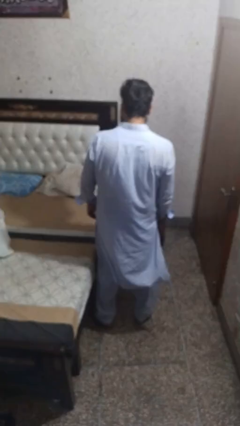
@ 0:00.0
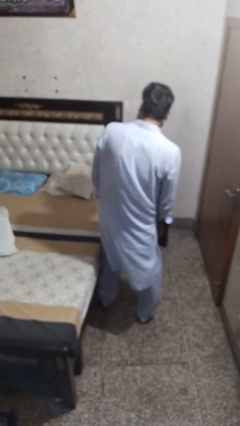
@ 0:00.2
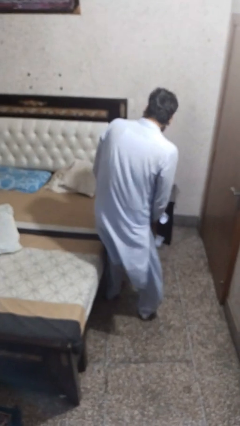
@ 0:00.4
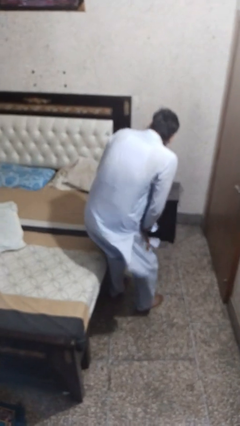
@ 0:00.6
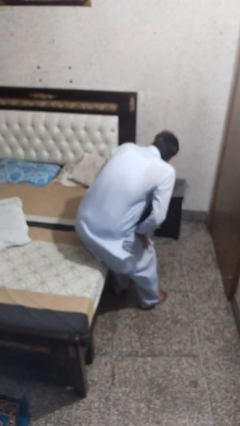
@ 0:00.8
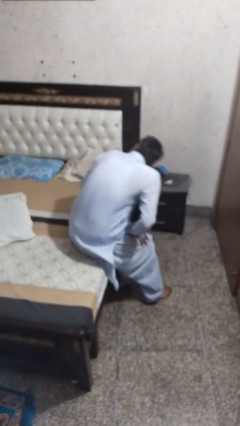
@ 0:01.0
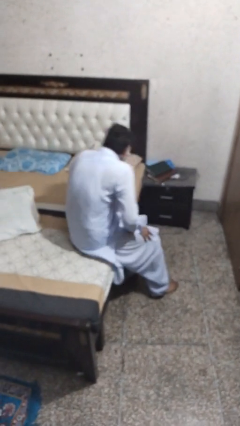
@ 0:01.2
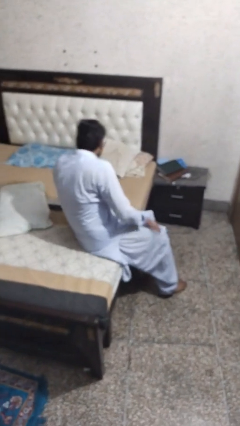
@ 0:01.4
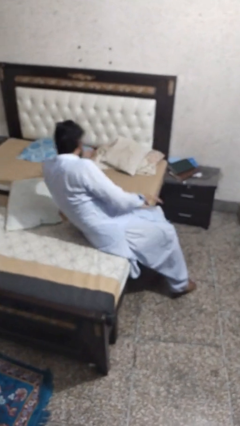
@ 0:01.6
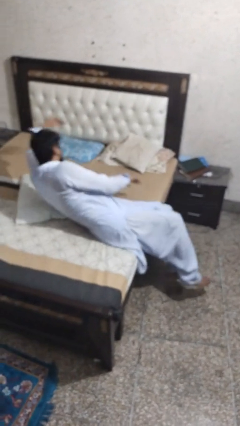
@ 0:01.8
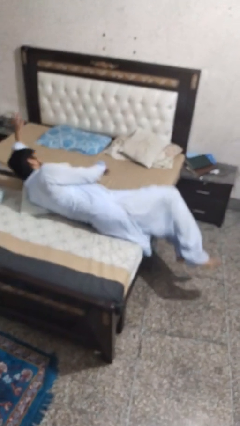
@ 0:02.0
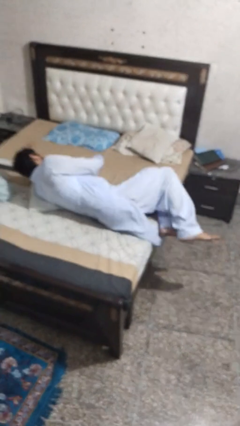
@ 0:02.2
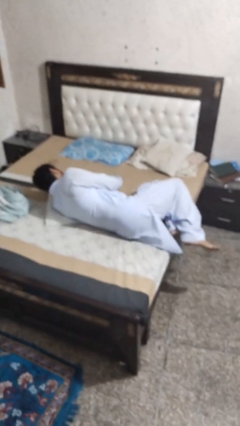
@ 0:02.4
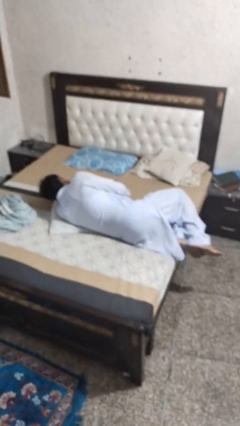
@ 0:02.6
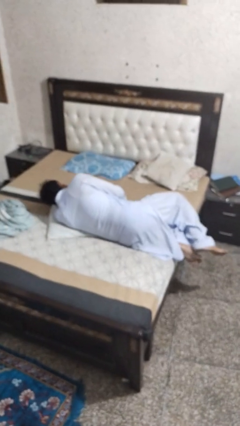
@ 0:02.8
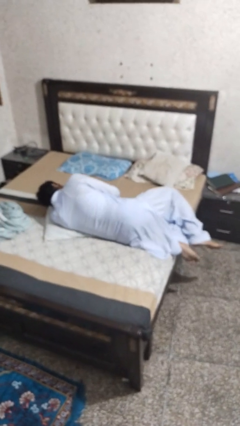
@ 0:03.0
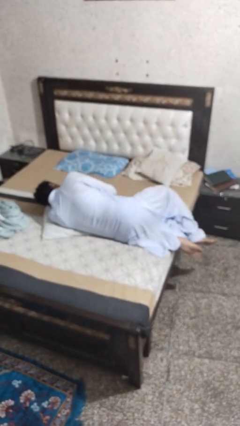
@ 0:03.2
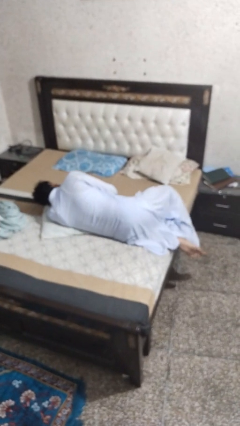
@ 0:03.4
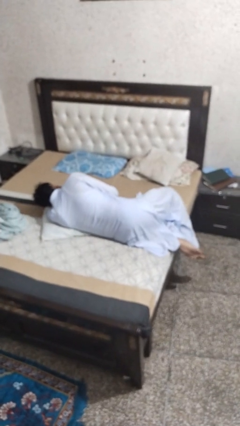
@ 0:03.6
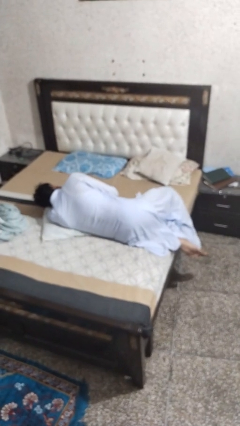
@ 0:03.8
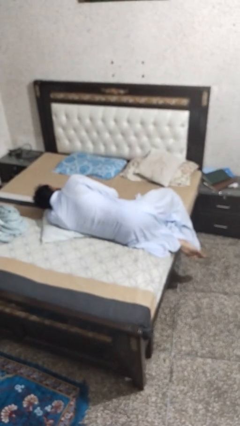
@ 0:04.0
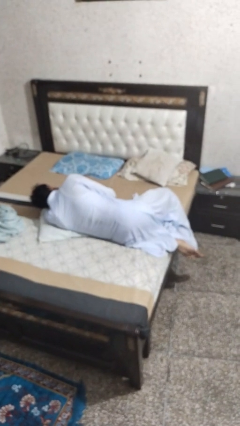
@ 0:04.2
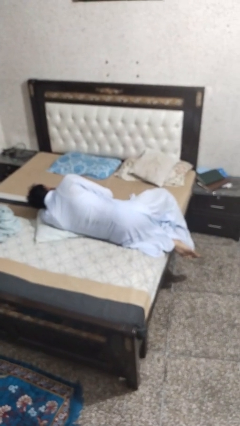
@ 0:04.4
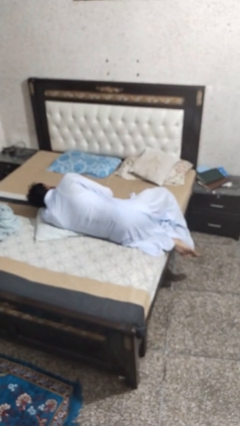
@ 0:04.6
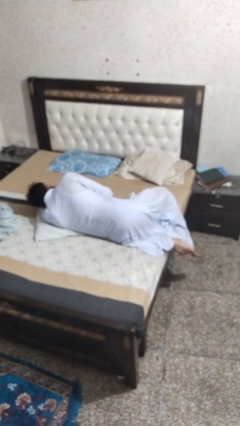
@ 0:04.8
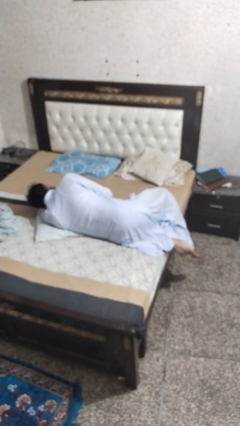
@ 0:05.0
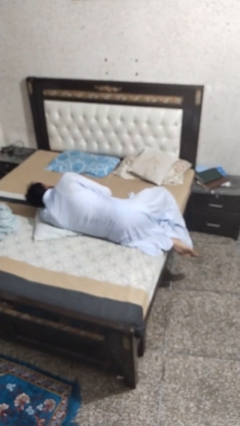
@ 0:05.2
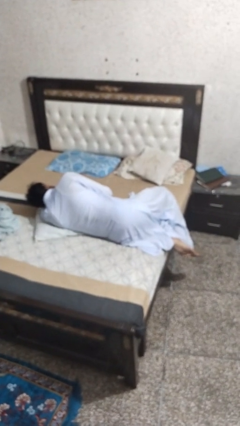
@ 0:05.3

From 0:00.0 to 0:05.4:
person lies down on bed

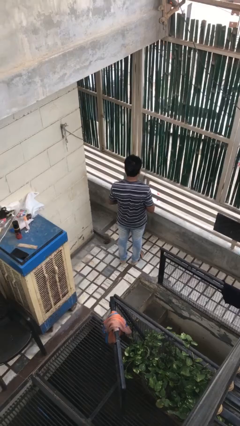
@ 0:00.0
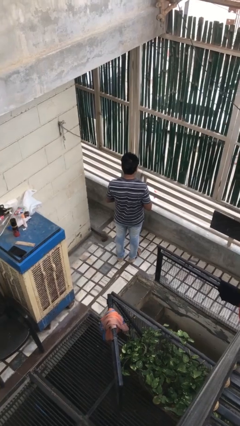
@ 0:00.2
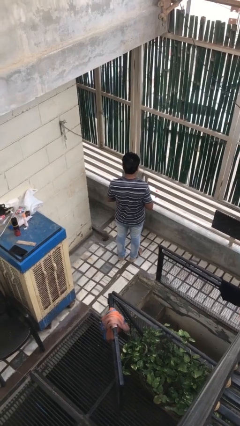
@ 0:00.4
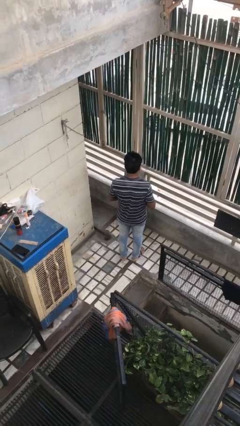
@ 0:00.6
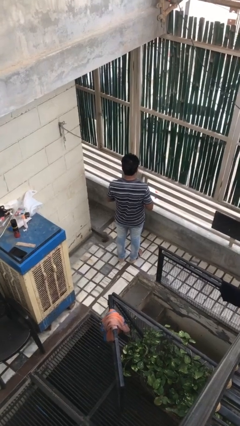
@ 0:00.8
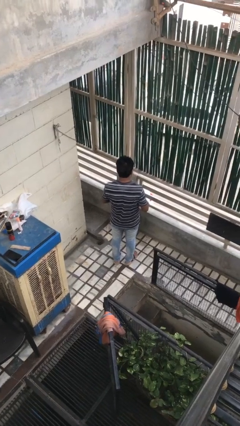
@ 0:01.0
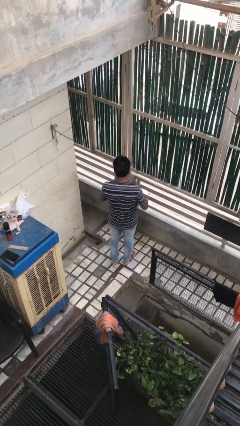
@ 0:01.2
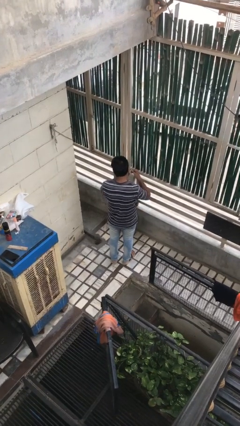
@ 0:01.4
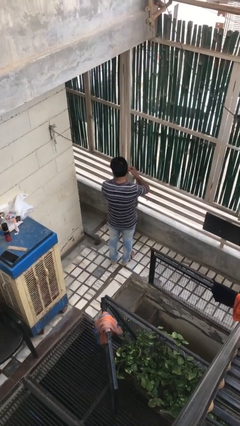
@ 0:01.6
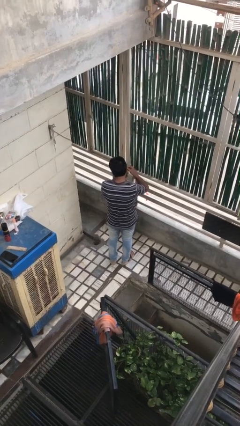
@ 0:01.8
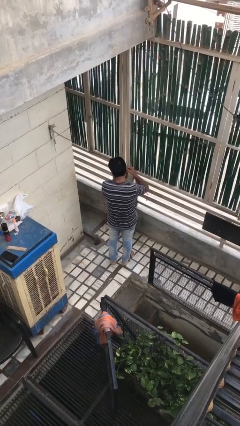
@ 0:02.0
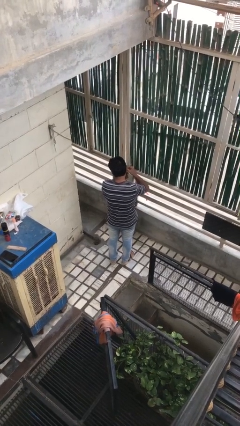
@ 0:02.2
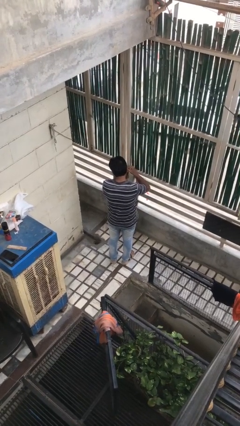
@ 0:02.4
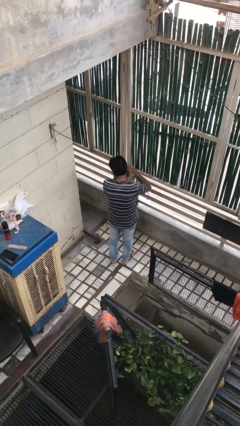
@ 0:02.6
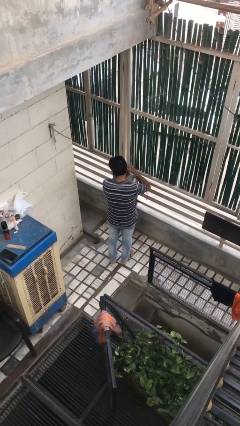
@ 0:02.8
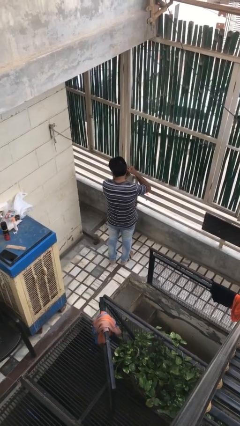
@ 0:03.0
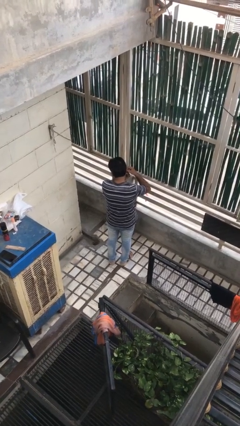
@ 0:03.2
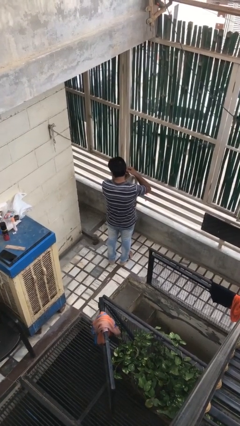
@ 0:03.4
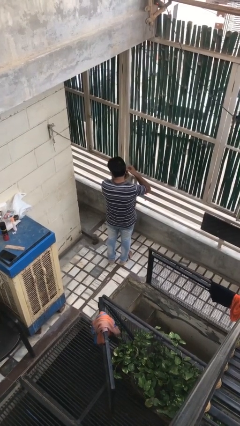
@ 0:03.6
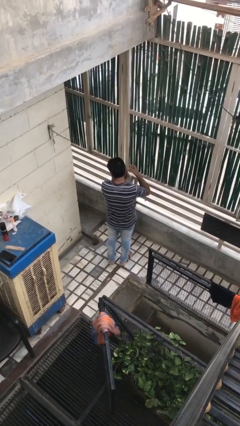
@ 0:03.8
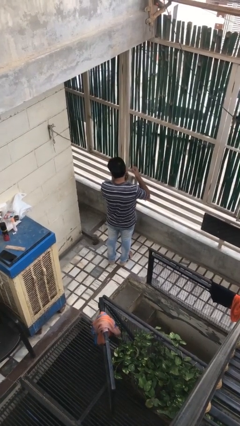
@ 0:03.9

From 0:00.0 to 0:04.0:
person puts on earrings

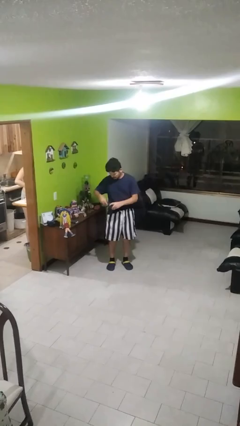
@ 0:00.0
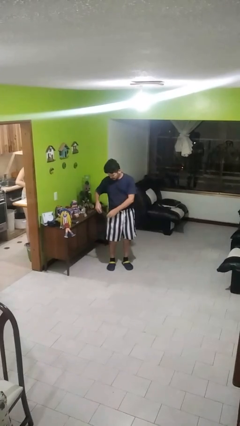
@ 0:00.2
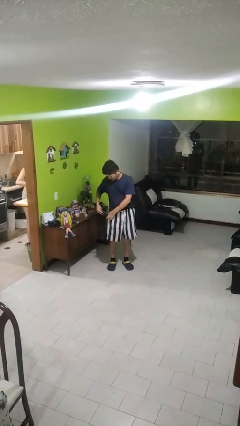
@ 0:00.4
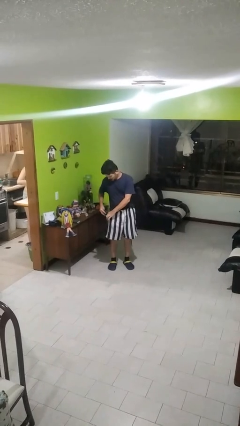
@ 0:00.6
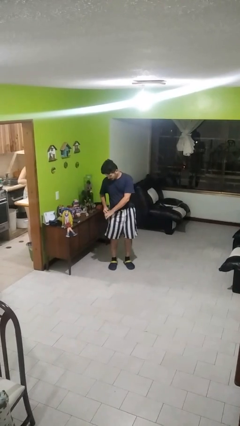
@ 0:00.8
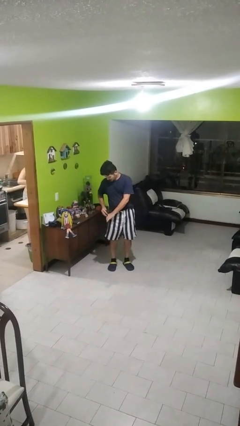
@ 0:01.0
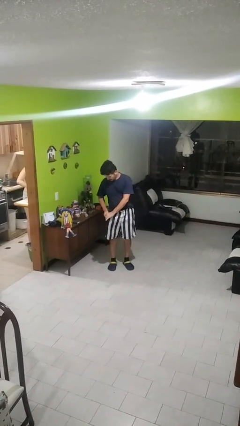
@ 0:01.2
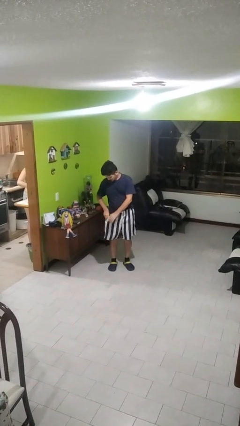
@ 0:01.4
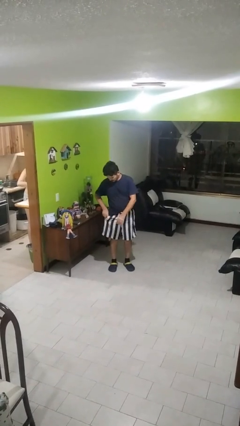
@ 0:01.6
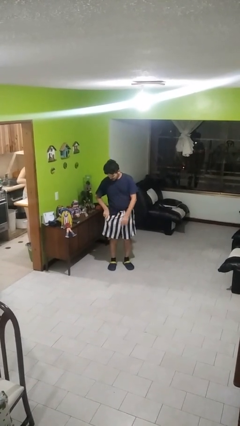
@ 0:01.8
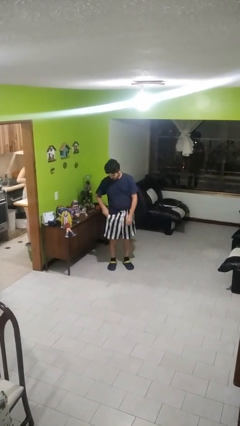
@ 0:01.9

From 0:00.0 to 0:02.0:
person puts phone into pocket

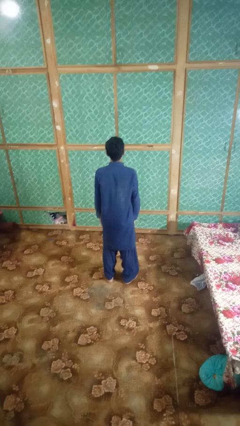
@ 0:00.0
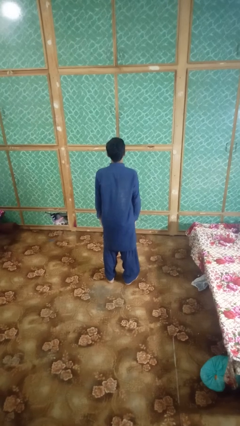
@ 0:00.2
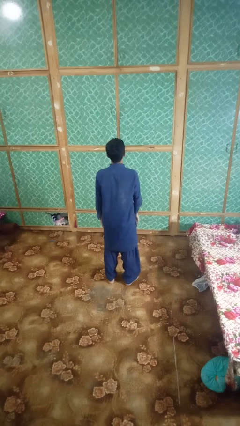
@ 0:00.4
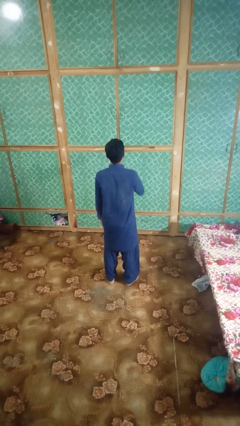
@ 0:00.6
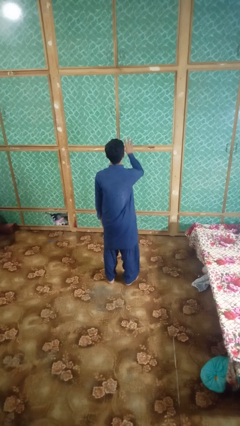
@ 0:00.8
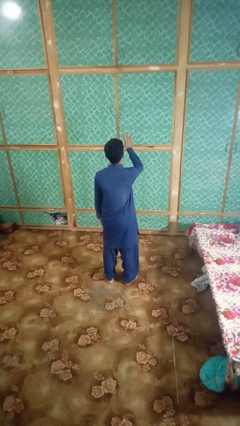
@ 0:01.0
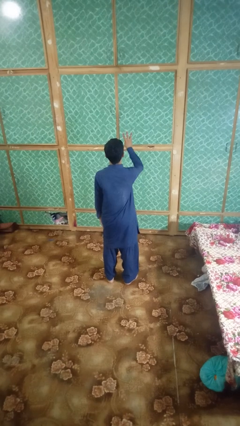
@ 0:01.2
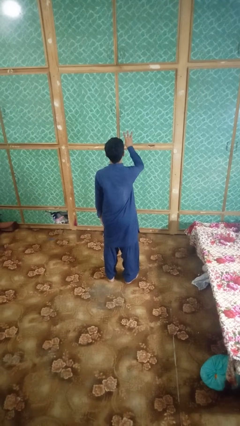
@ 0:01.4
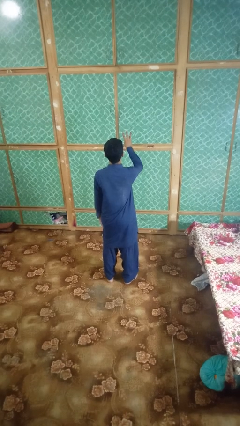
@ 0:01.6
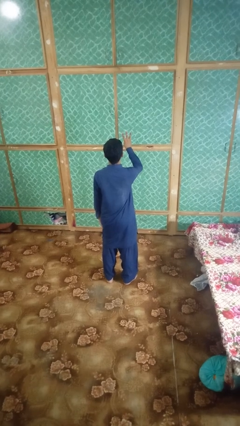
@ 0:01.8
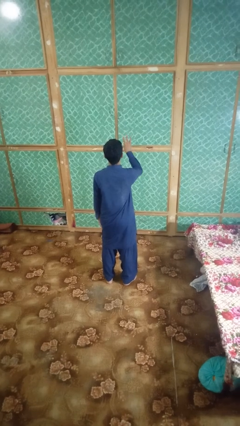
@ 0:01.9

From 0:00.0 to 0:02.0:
person gestures number three

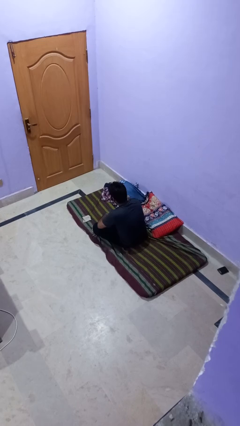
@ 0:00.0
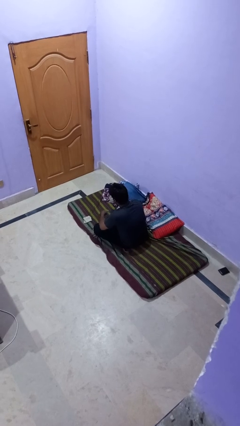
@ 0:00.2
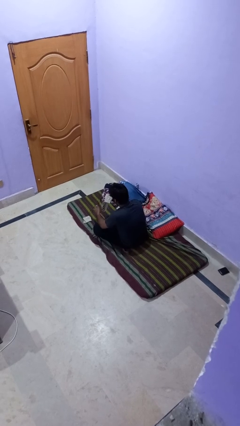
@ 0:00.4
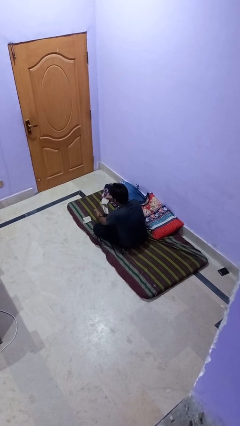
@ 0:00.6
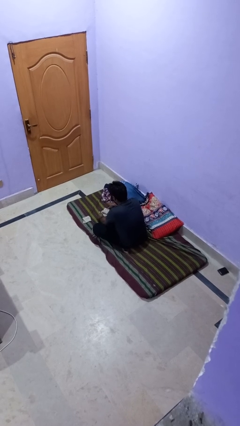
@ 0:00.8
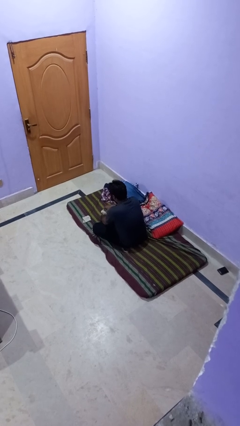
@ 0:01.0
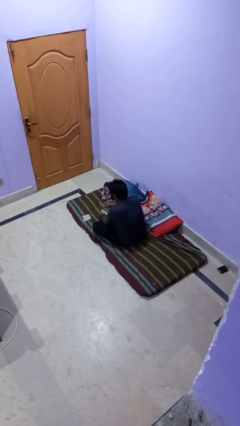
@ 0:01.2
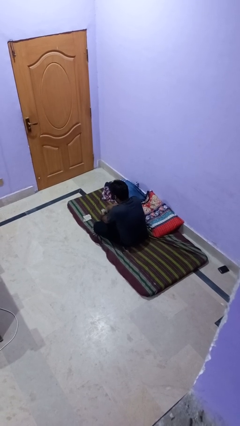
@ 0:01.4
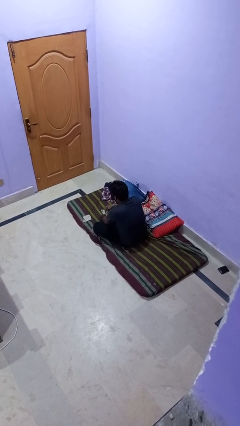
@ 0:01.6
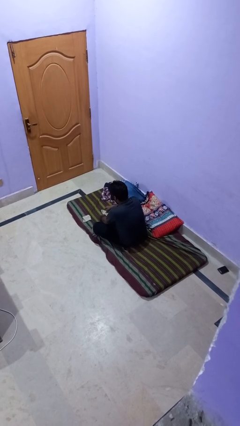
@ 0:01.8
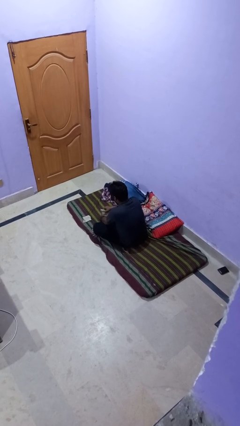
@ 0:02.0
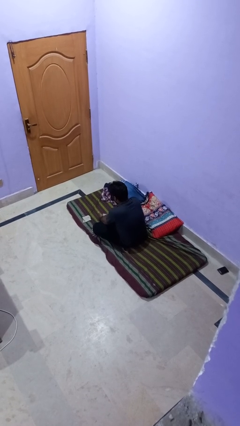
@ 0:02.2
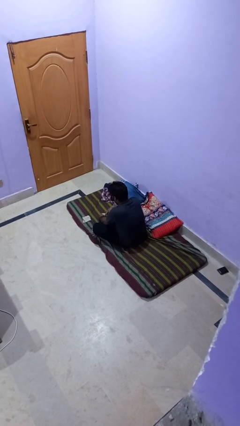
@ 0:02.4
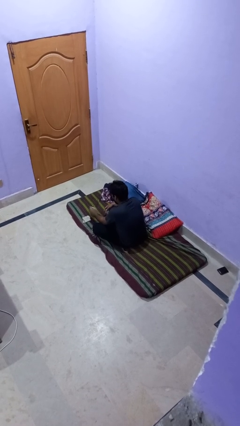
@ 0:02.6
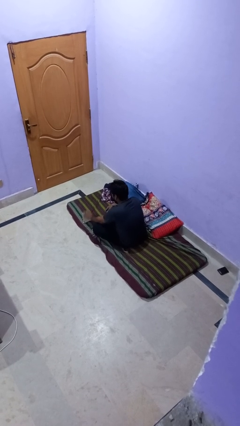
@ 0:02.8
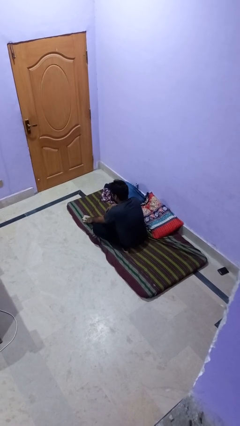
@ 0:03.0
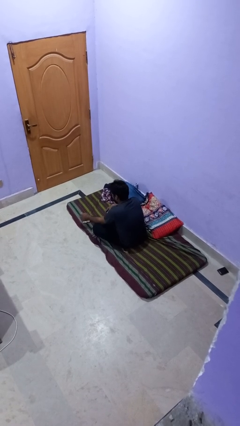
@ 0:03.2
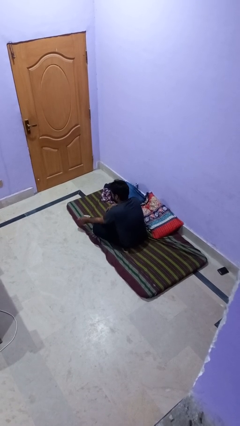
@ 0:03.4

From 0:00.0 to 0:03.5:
person folds socks

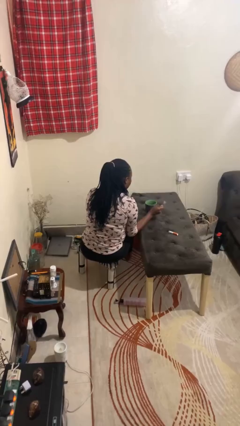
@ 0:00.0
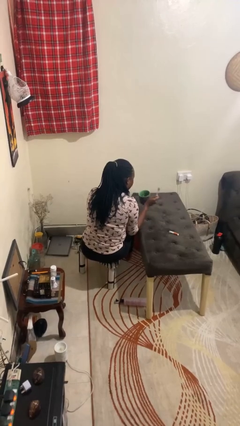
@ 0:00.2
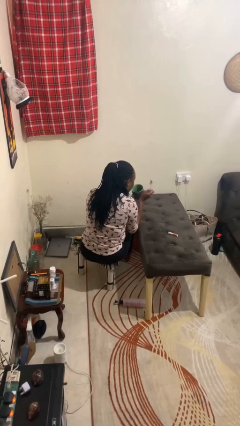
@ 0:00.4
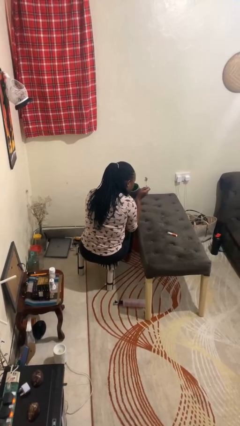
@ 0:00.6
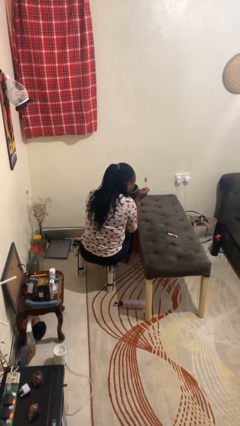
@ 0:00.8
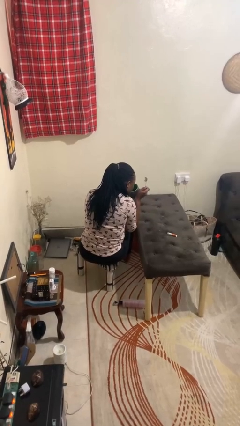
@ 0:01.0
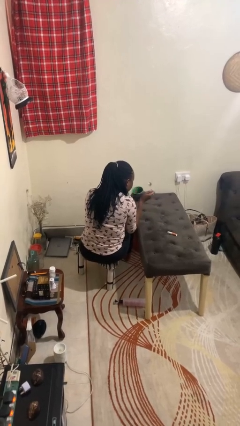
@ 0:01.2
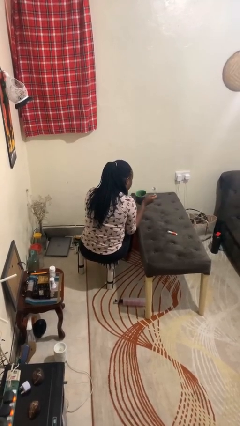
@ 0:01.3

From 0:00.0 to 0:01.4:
person drinks from mug
